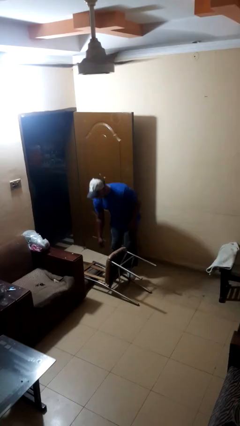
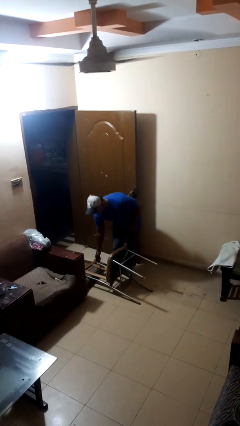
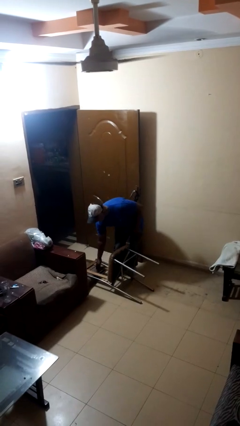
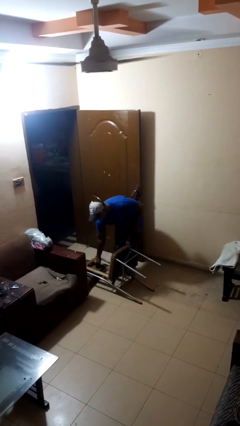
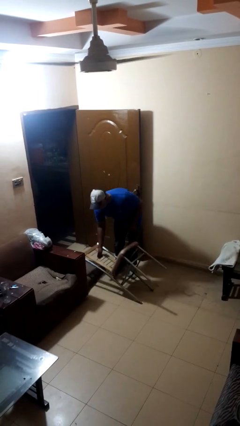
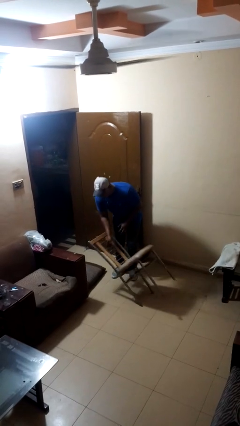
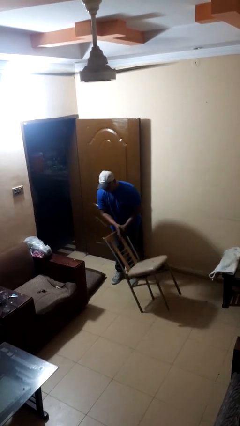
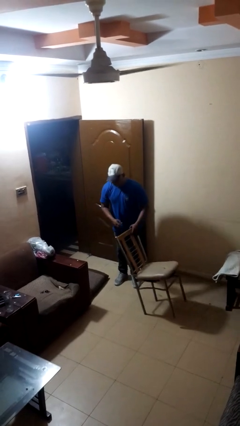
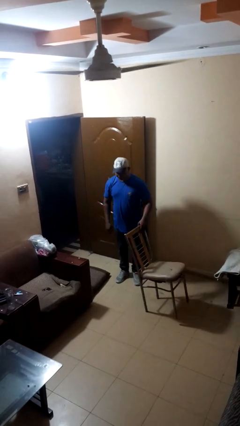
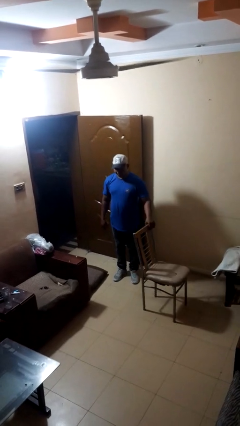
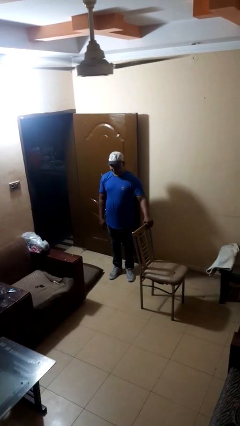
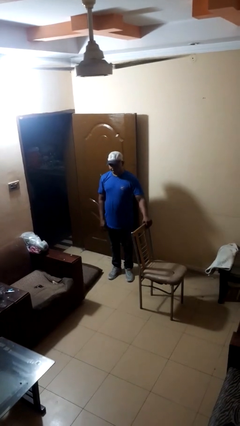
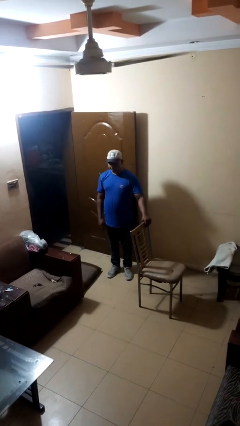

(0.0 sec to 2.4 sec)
person sets upright furniture

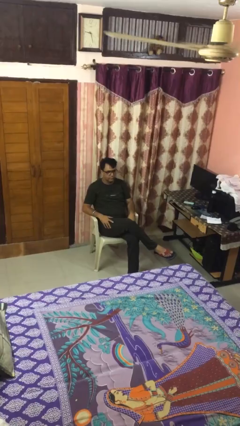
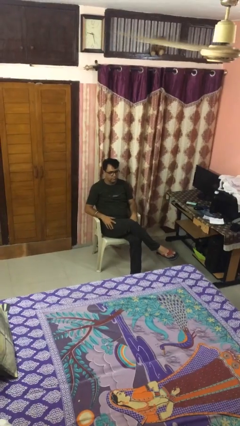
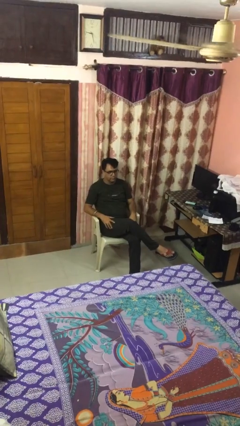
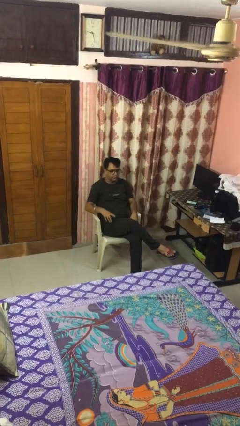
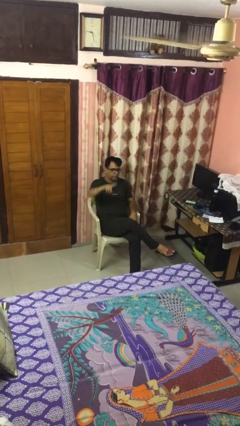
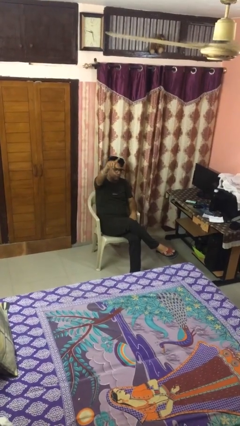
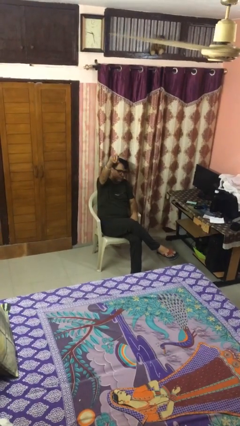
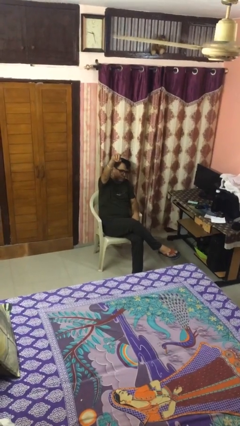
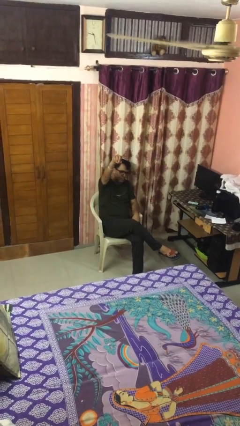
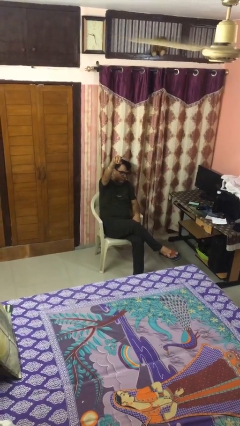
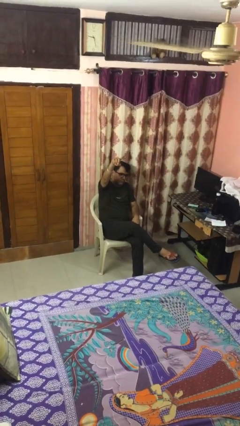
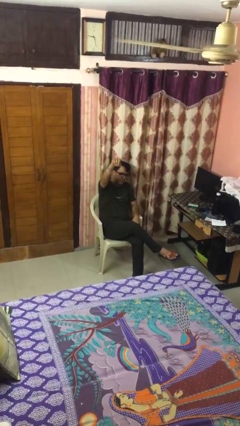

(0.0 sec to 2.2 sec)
person gestures raise hand

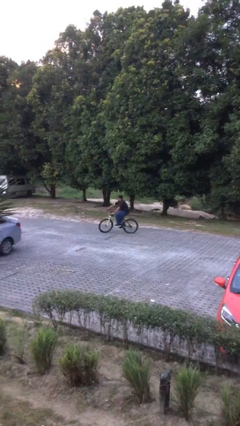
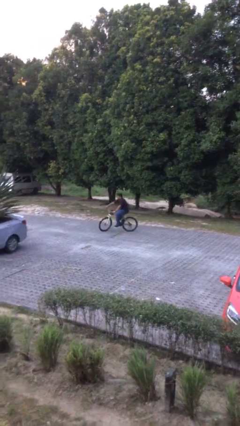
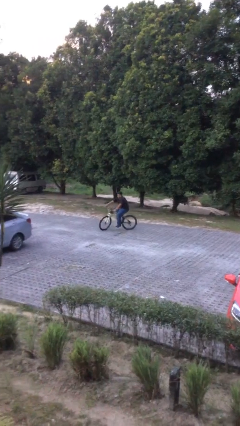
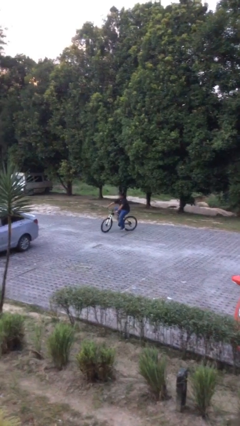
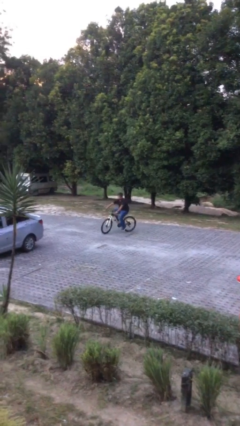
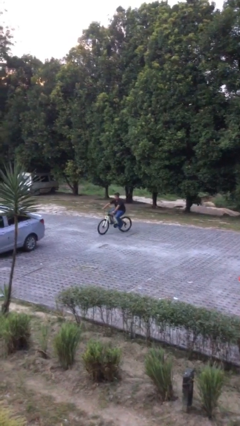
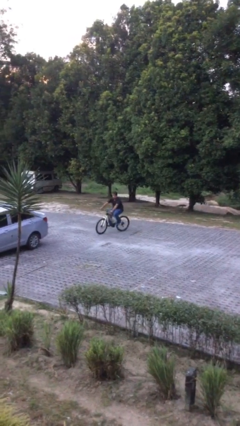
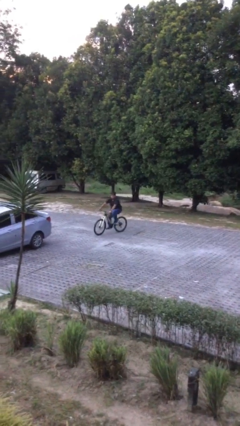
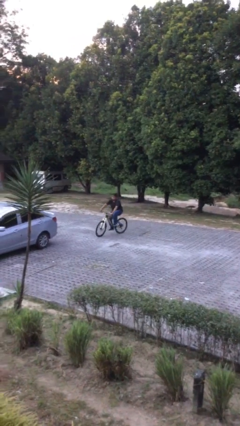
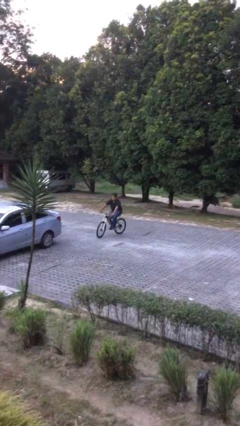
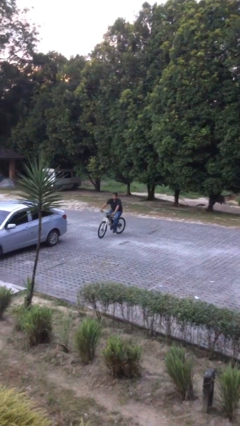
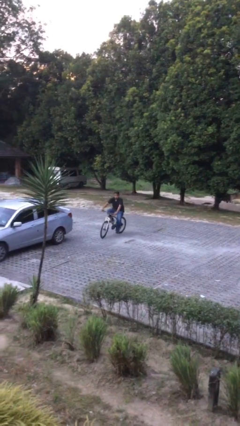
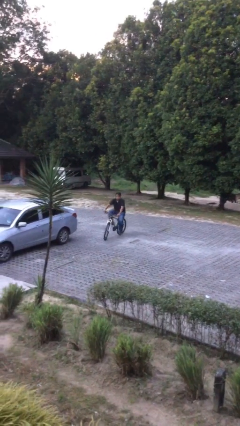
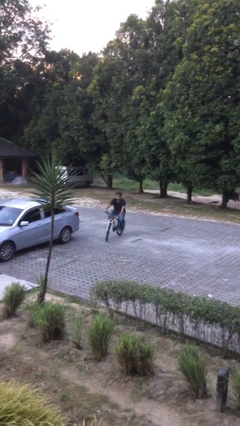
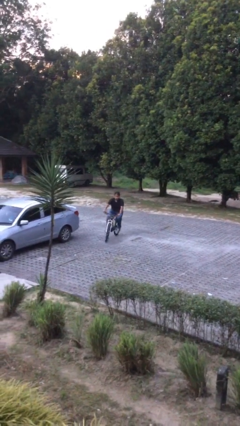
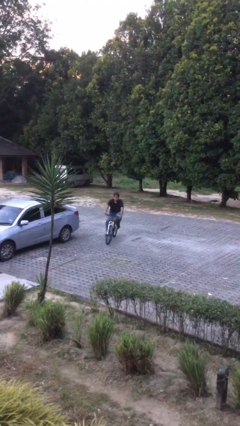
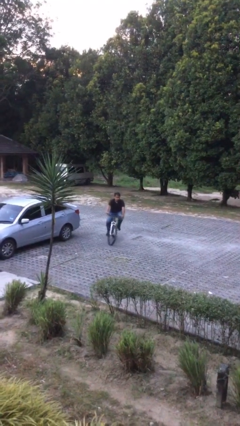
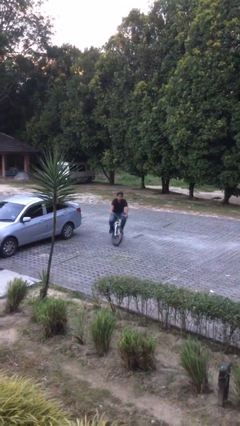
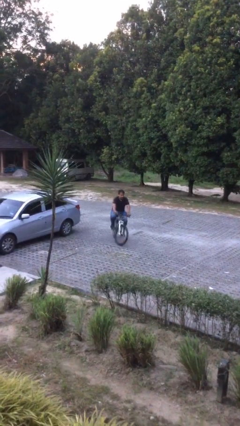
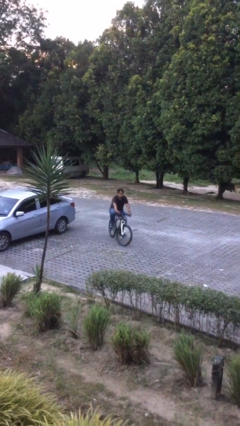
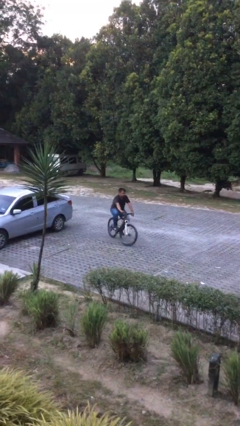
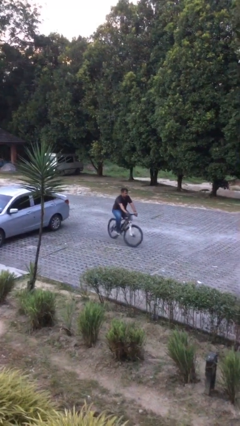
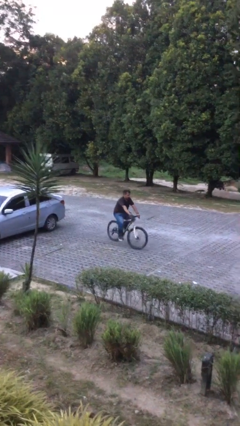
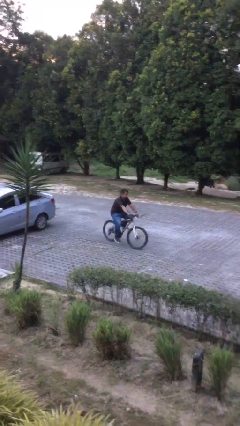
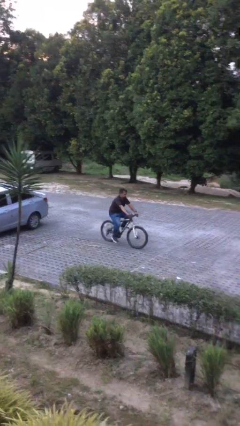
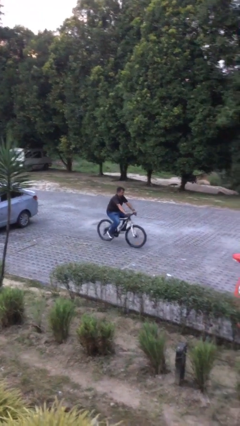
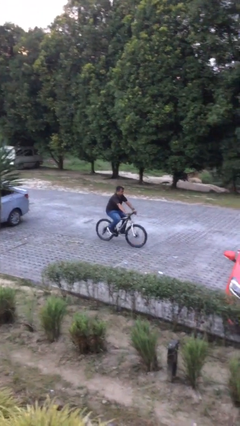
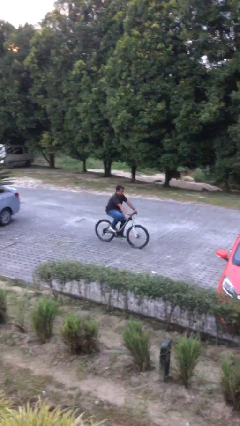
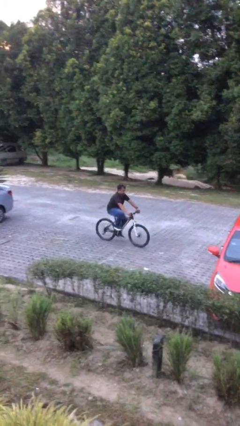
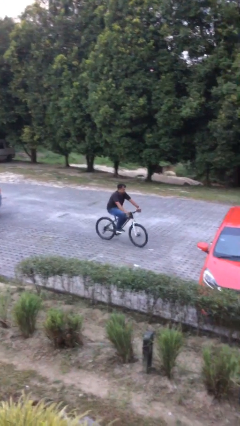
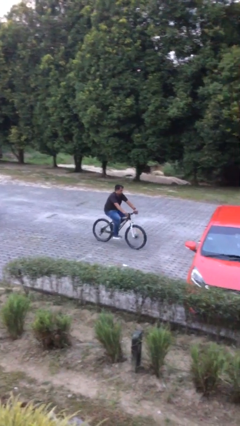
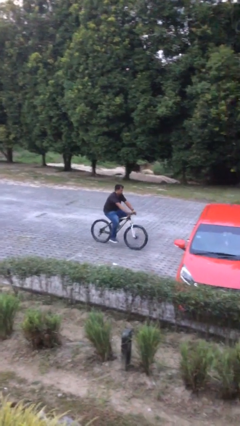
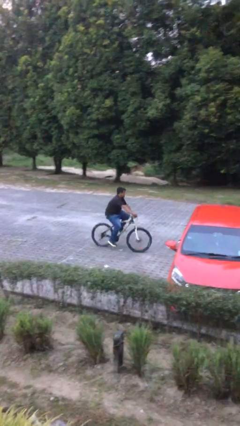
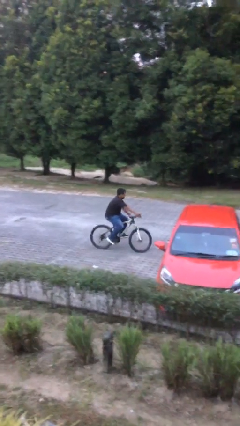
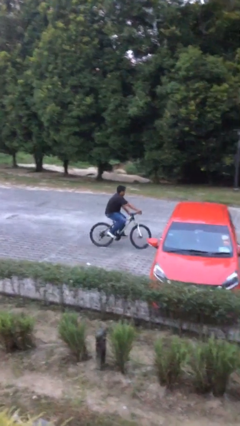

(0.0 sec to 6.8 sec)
person rides bicycle

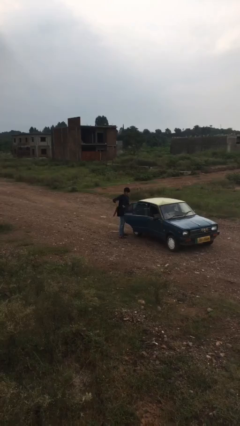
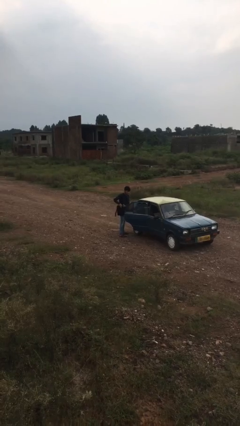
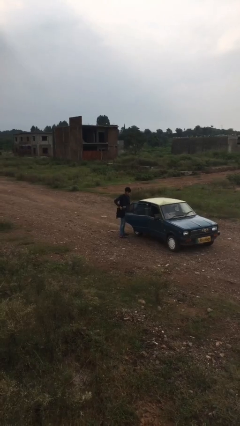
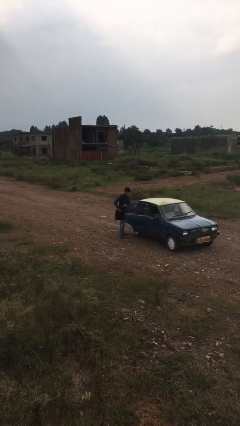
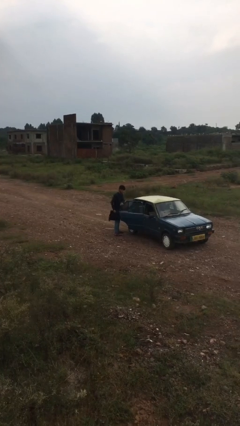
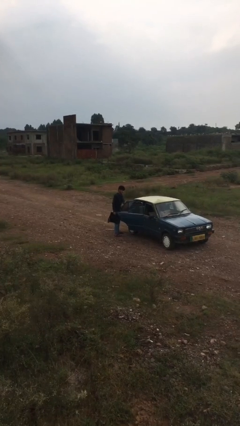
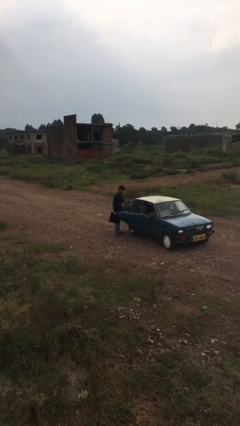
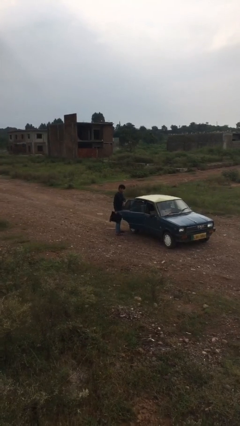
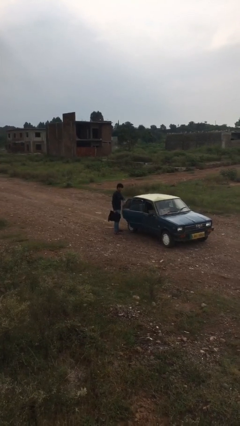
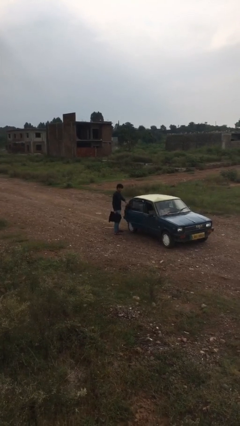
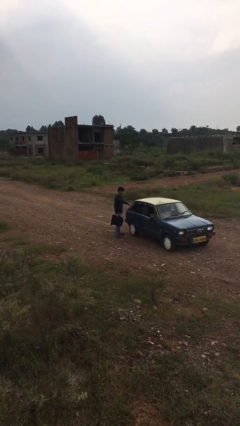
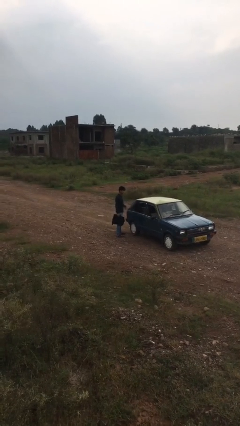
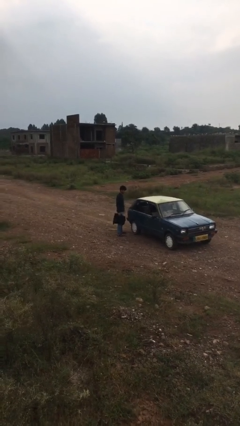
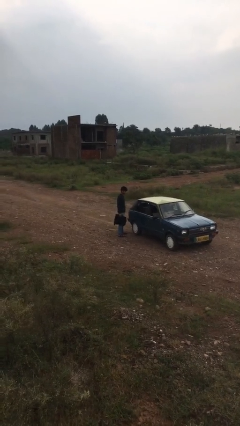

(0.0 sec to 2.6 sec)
person closes car door

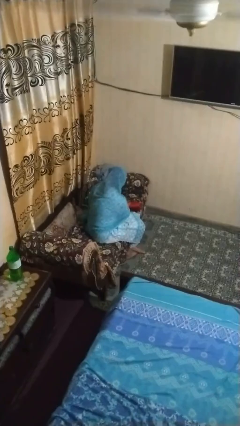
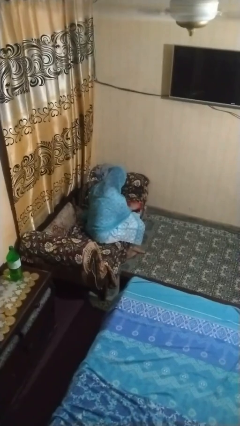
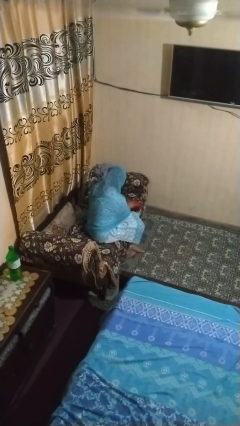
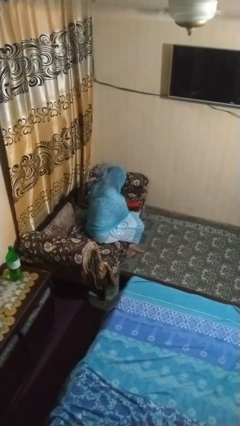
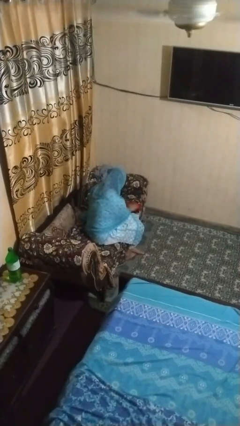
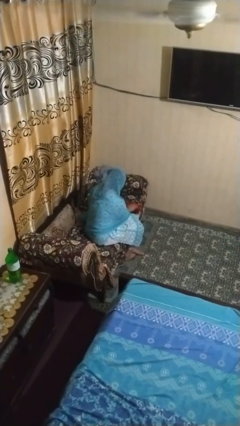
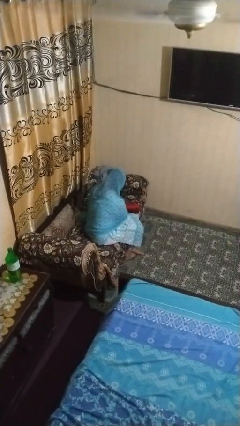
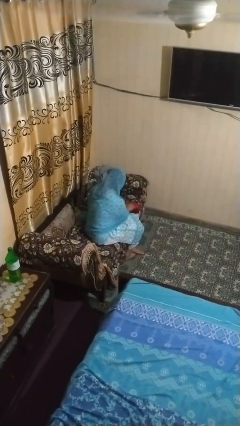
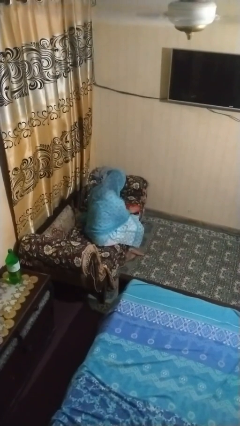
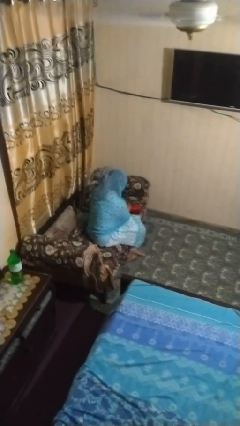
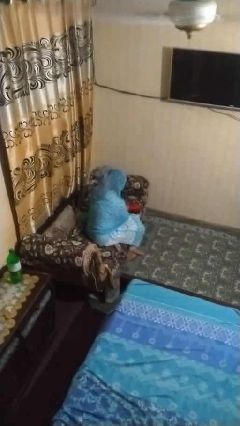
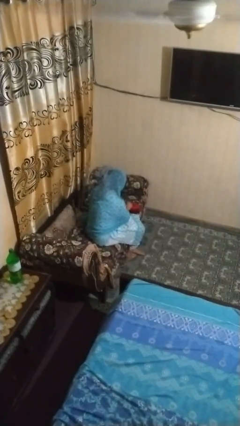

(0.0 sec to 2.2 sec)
person waves hand over object

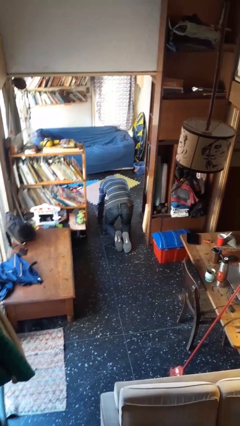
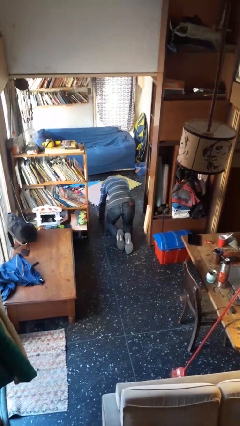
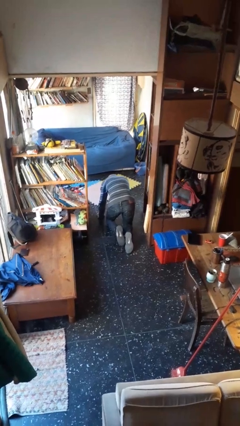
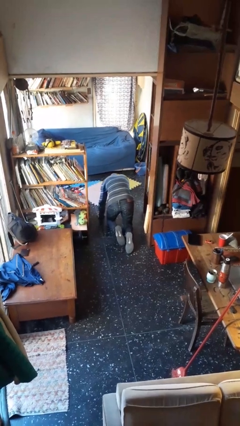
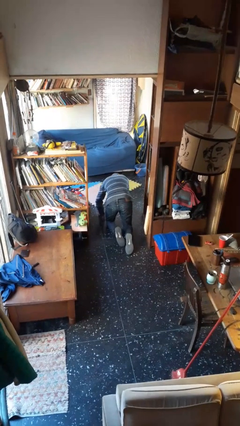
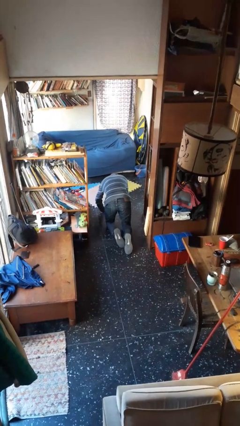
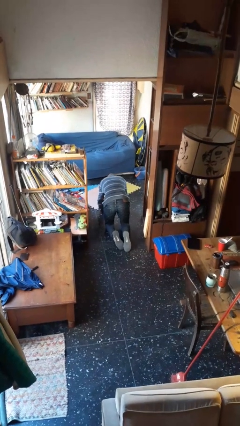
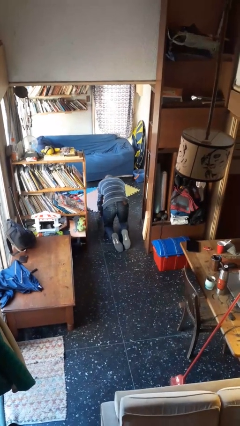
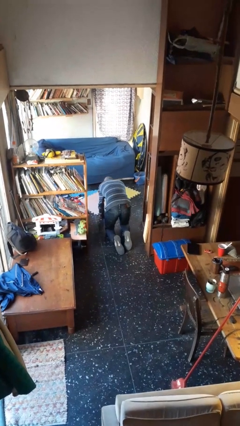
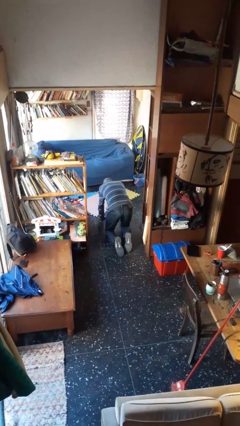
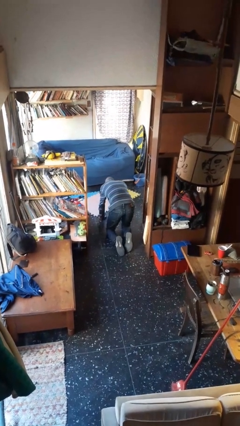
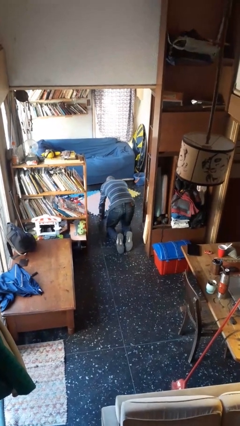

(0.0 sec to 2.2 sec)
person crawls
